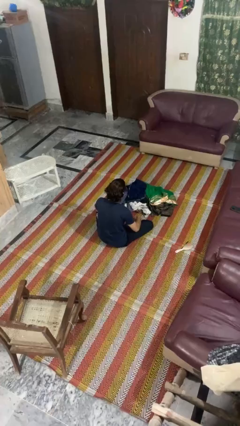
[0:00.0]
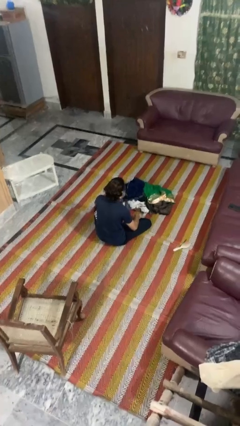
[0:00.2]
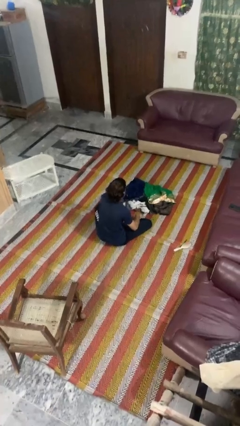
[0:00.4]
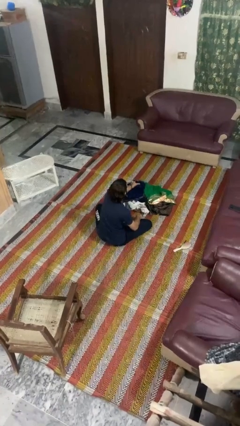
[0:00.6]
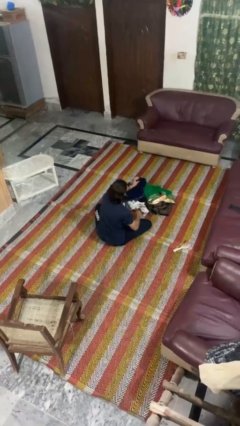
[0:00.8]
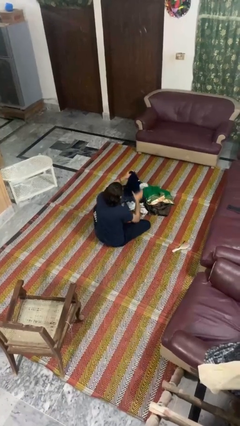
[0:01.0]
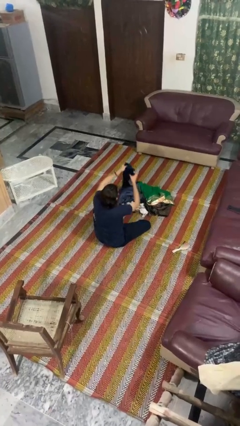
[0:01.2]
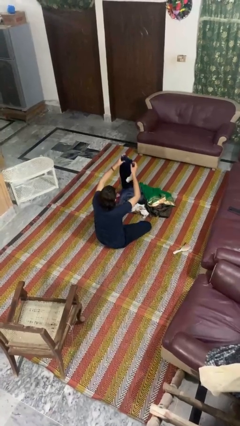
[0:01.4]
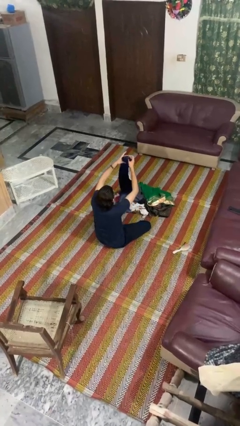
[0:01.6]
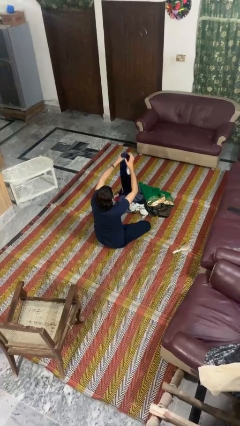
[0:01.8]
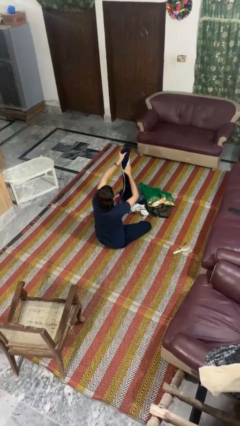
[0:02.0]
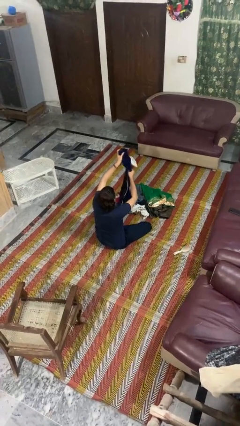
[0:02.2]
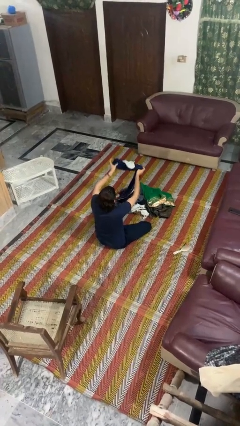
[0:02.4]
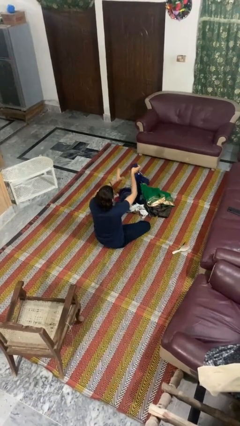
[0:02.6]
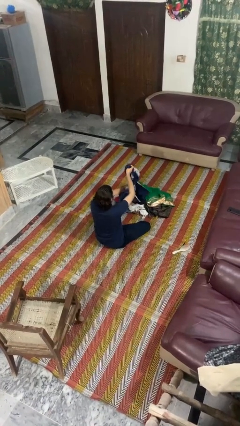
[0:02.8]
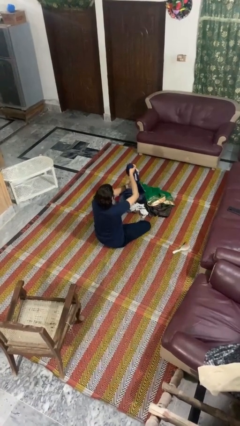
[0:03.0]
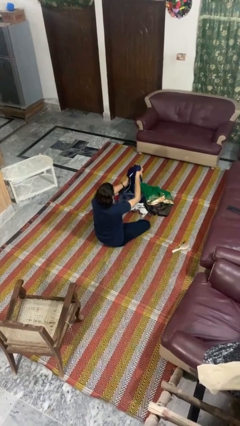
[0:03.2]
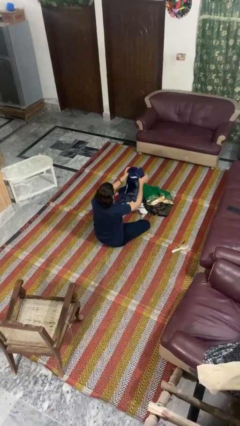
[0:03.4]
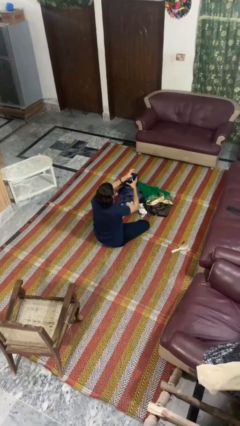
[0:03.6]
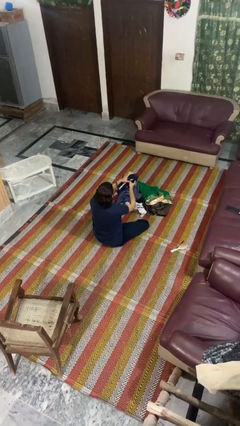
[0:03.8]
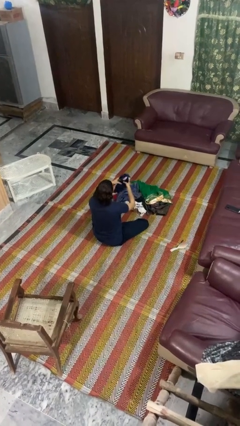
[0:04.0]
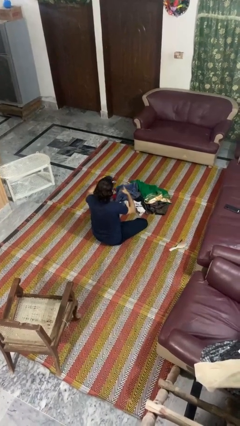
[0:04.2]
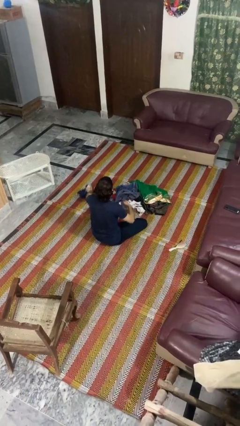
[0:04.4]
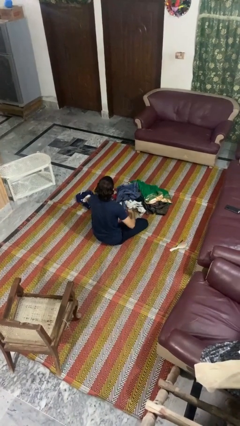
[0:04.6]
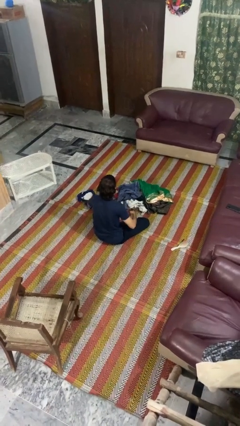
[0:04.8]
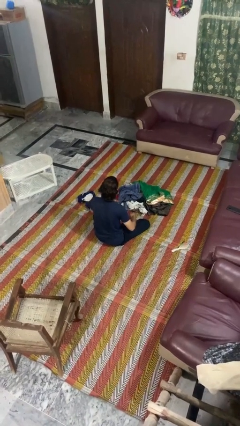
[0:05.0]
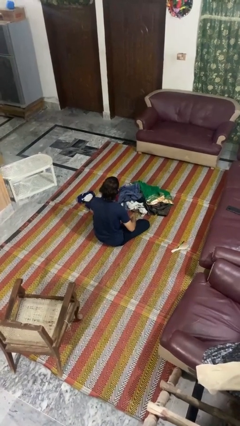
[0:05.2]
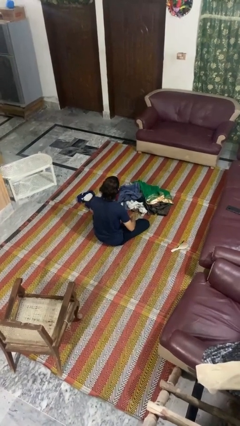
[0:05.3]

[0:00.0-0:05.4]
person folds pants

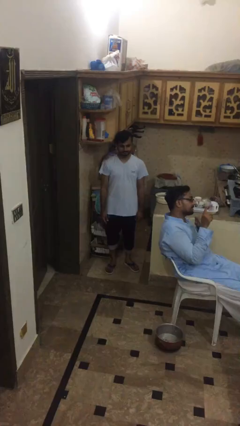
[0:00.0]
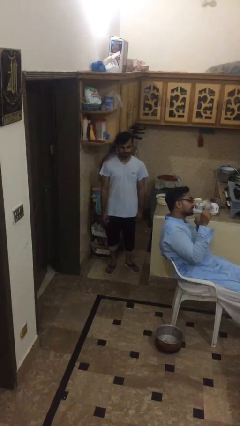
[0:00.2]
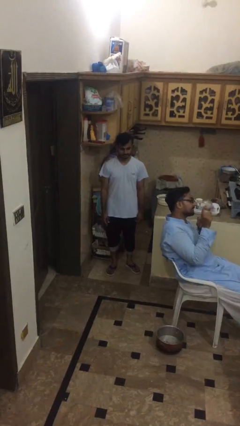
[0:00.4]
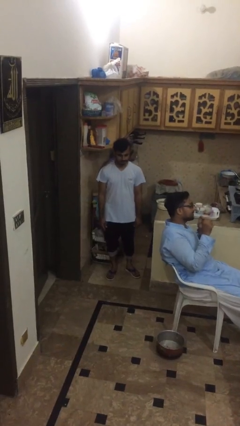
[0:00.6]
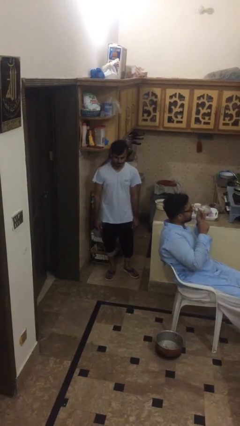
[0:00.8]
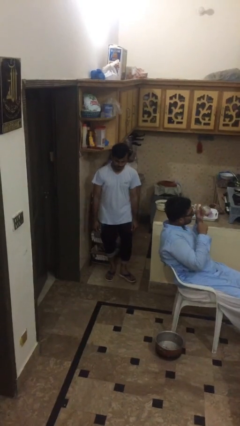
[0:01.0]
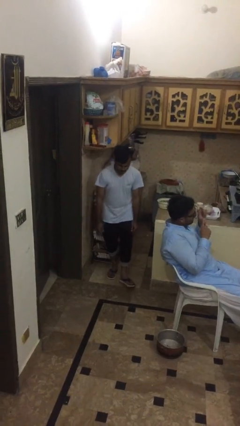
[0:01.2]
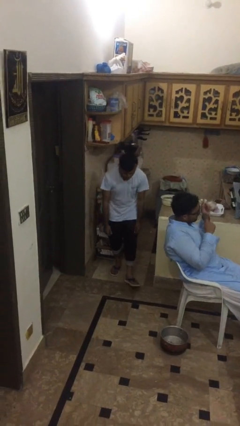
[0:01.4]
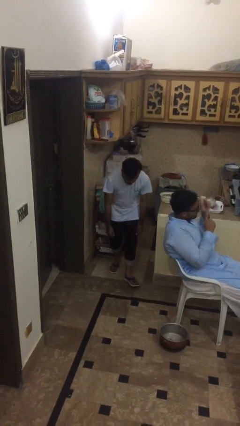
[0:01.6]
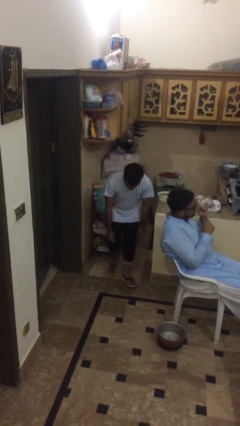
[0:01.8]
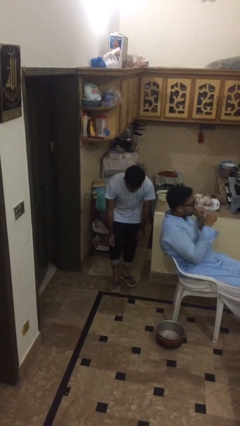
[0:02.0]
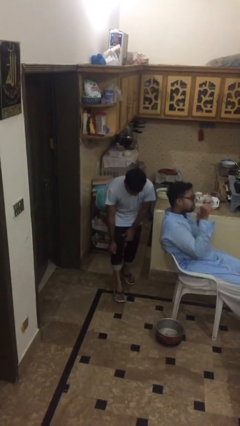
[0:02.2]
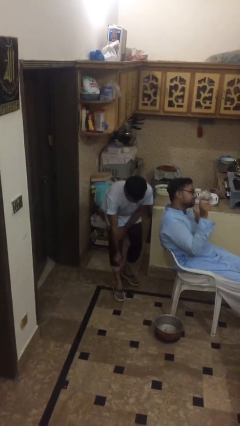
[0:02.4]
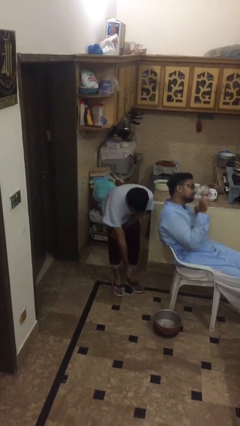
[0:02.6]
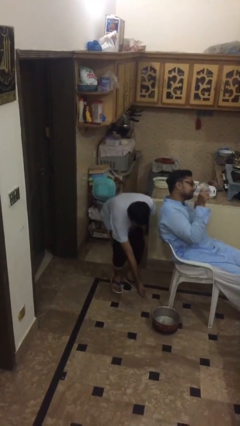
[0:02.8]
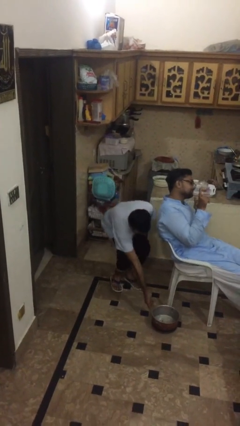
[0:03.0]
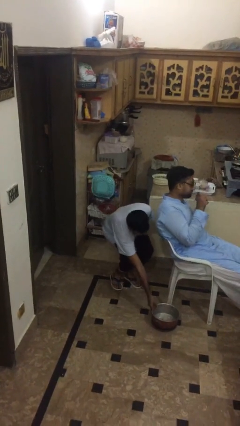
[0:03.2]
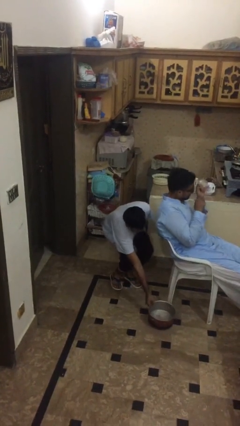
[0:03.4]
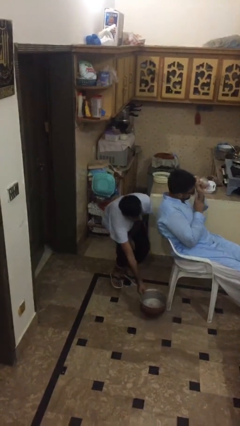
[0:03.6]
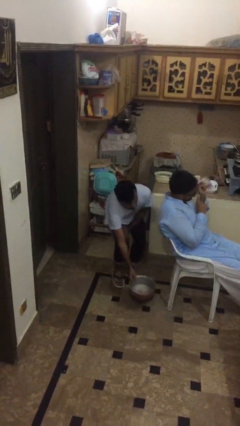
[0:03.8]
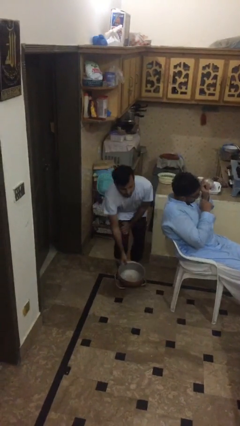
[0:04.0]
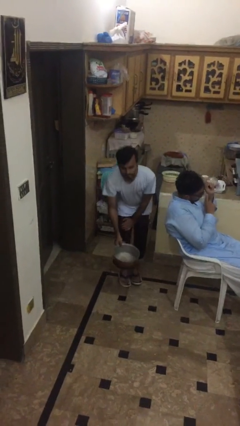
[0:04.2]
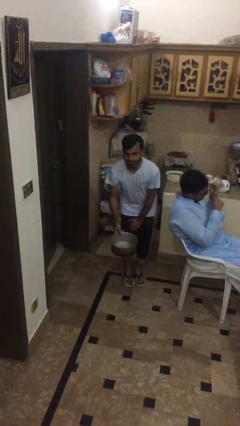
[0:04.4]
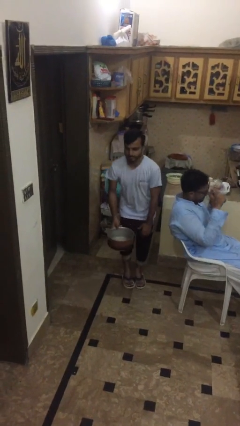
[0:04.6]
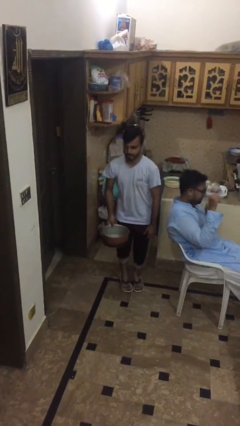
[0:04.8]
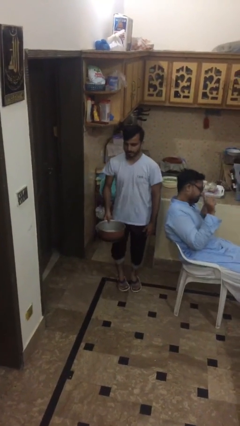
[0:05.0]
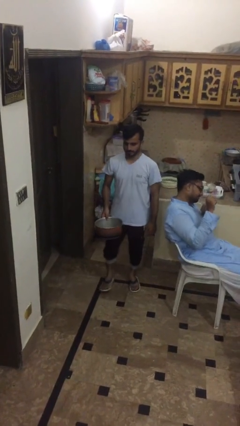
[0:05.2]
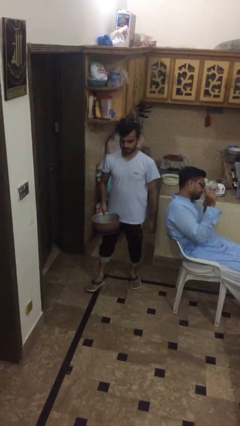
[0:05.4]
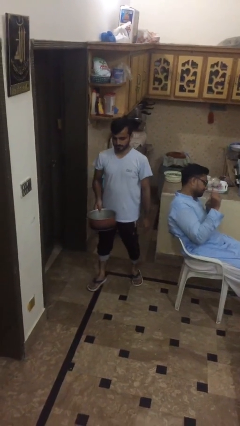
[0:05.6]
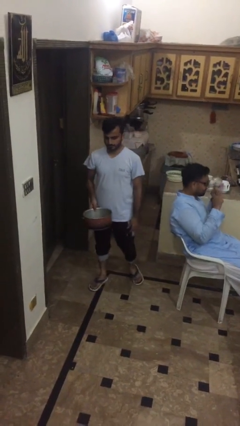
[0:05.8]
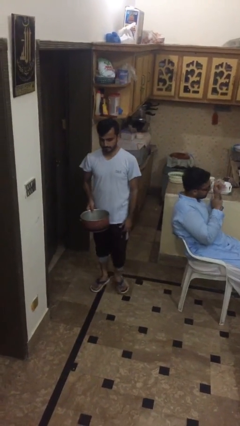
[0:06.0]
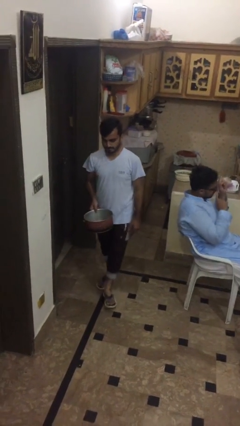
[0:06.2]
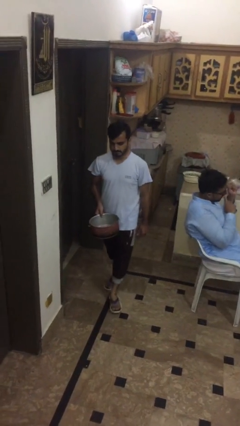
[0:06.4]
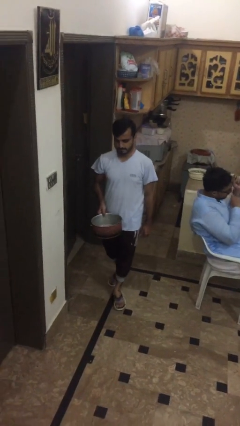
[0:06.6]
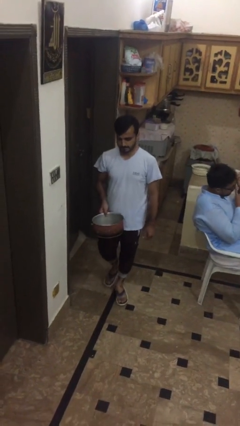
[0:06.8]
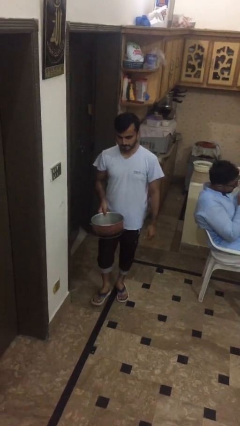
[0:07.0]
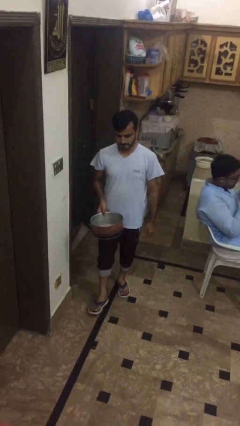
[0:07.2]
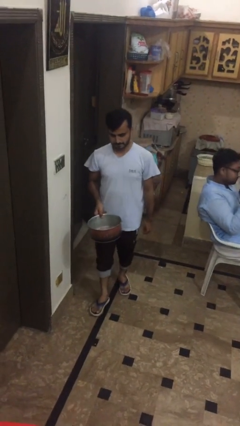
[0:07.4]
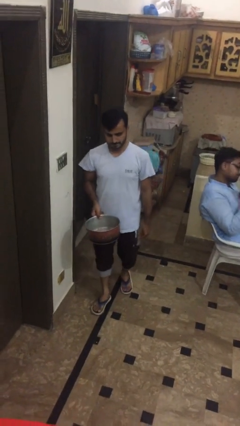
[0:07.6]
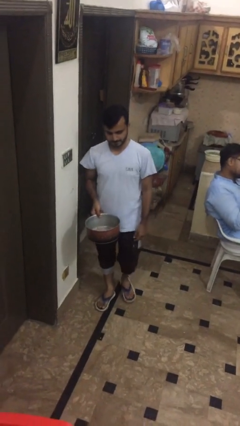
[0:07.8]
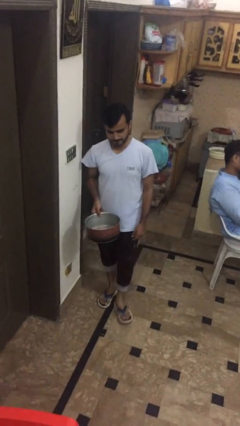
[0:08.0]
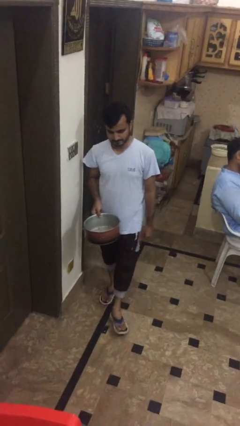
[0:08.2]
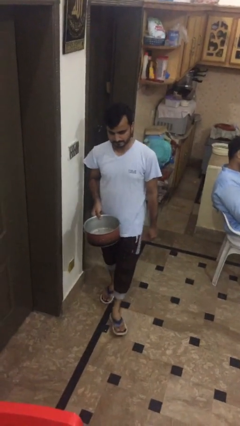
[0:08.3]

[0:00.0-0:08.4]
person steals object from person

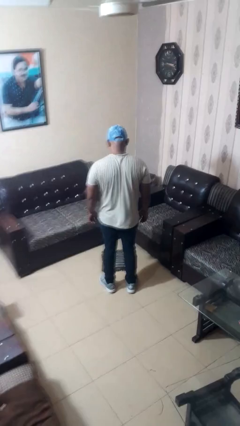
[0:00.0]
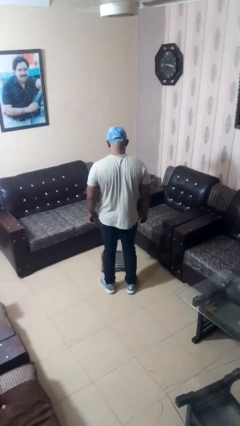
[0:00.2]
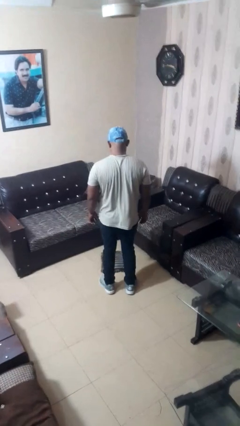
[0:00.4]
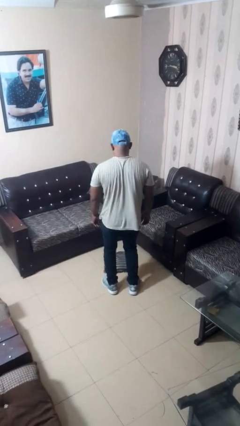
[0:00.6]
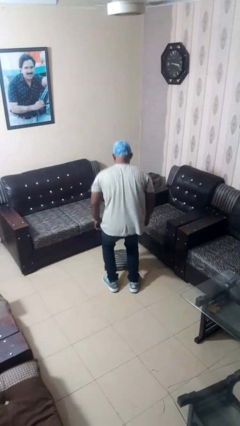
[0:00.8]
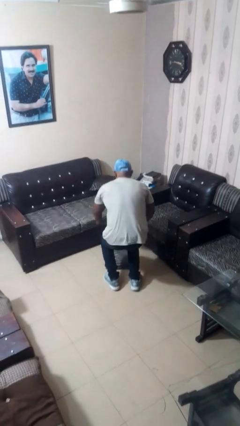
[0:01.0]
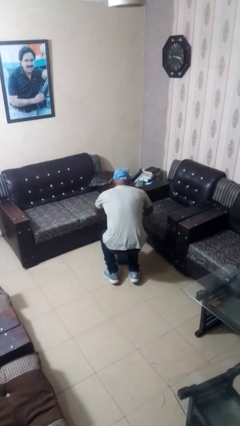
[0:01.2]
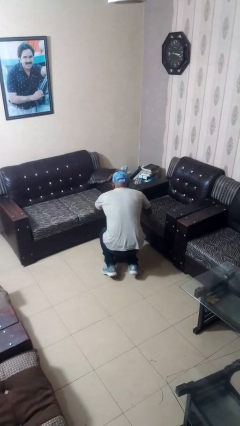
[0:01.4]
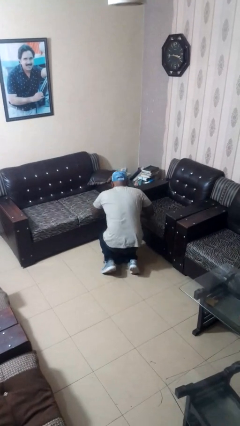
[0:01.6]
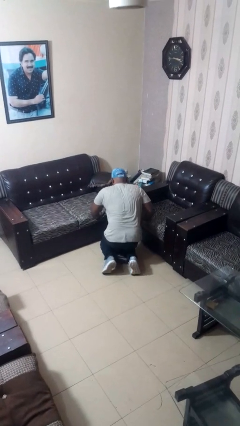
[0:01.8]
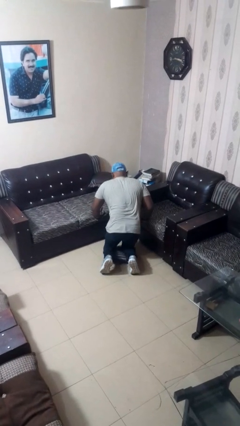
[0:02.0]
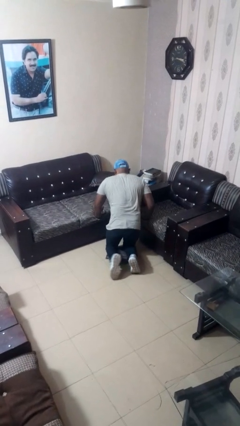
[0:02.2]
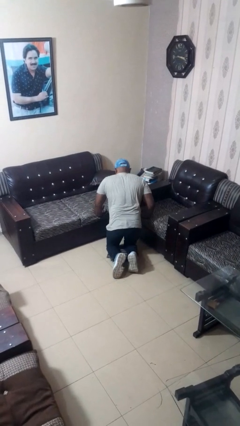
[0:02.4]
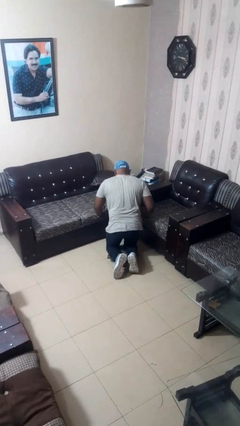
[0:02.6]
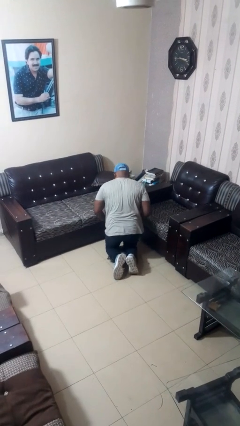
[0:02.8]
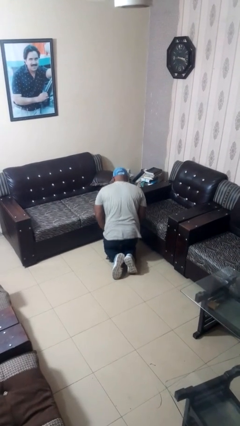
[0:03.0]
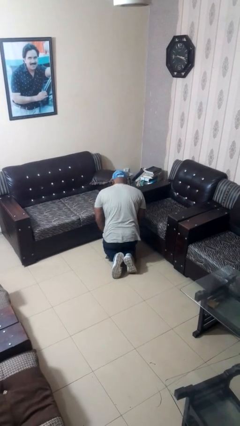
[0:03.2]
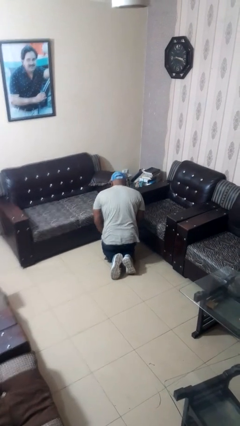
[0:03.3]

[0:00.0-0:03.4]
person kneels

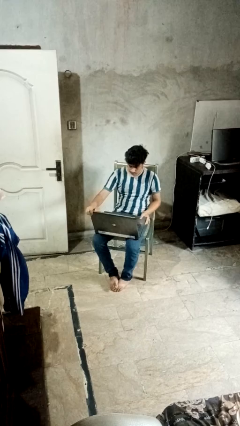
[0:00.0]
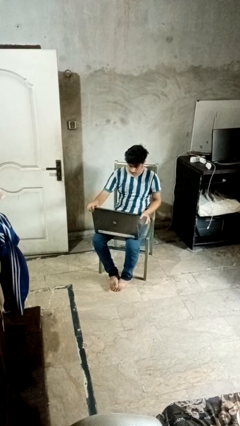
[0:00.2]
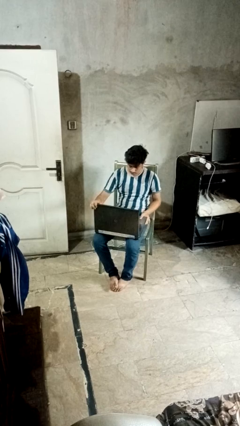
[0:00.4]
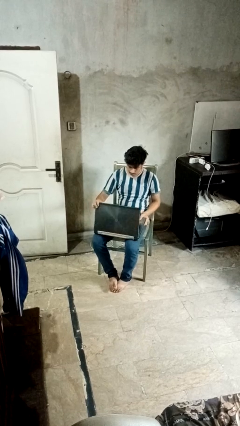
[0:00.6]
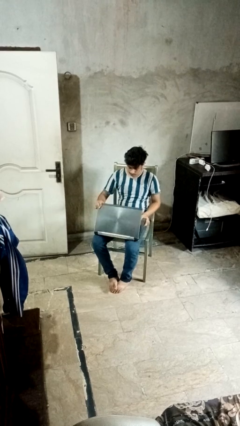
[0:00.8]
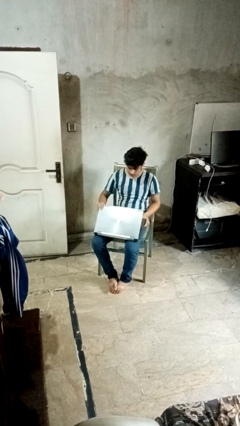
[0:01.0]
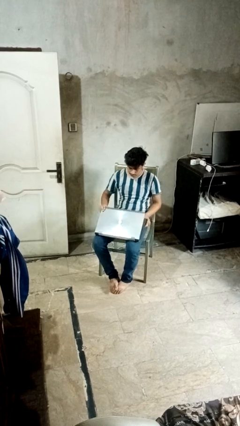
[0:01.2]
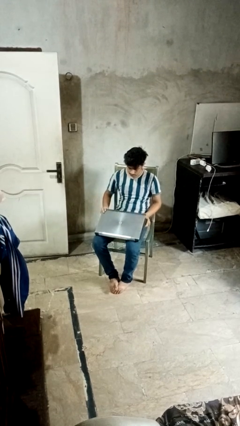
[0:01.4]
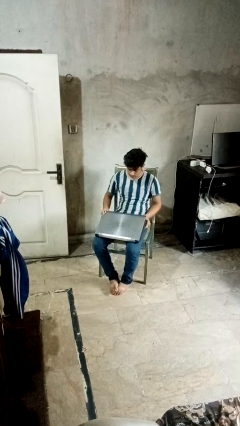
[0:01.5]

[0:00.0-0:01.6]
person closes laptop
